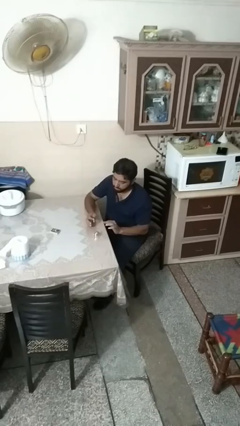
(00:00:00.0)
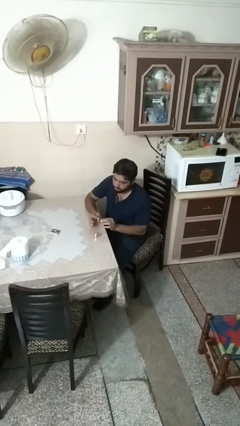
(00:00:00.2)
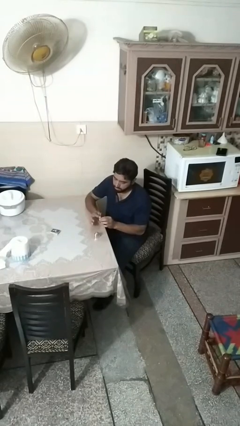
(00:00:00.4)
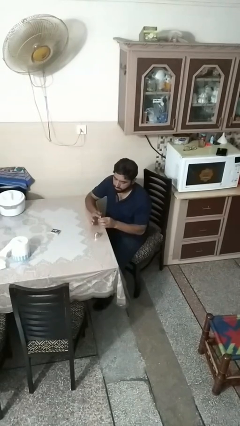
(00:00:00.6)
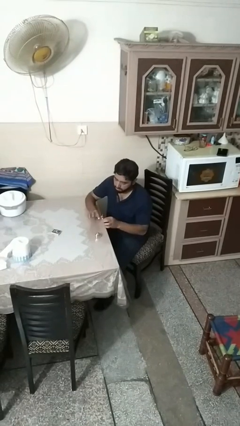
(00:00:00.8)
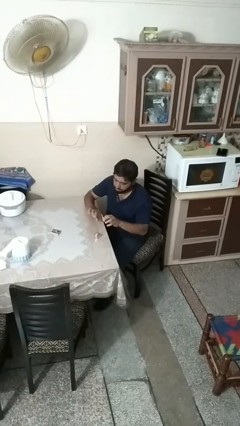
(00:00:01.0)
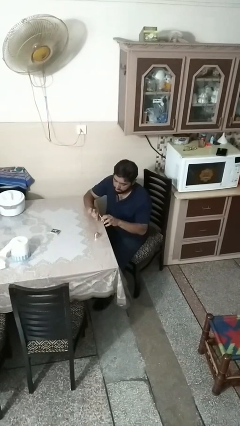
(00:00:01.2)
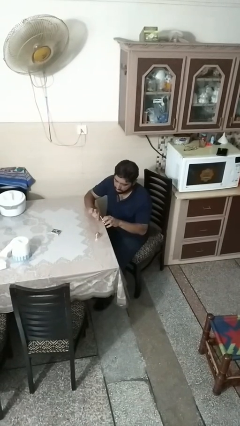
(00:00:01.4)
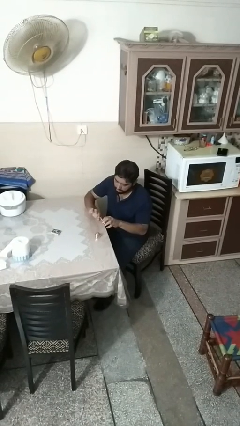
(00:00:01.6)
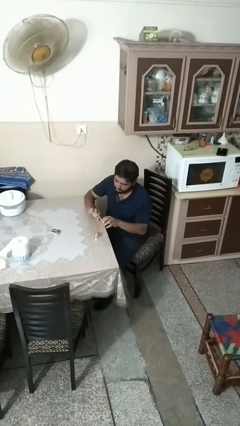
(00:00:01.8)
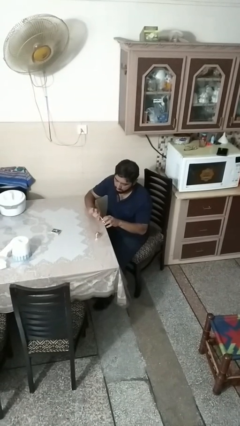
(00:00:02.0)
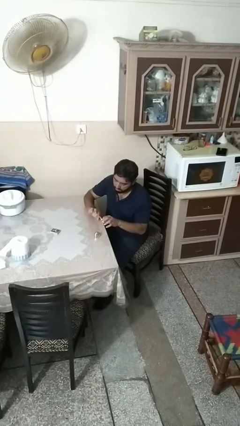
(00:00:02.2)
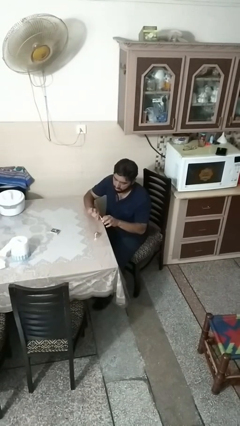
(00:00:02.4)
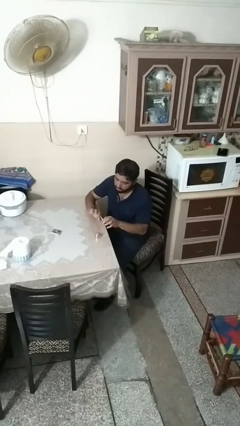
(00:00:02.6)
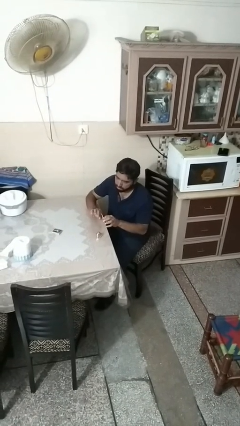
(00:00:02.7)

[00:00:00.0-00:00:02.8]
person paints fingernails

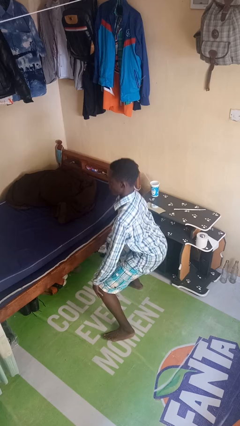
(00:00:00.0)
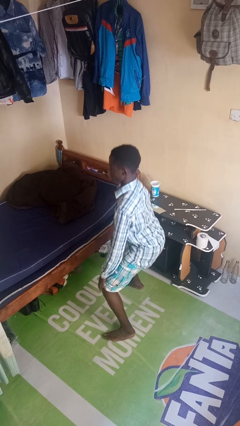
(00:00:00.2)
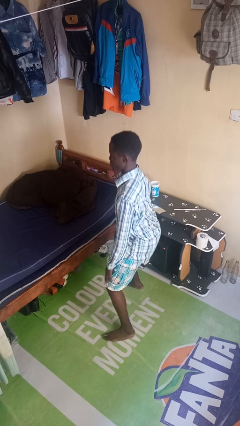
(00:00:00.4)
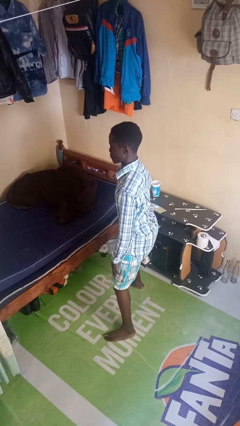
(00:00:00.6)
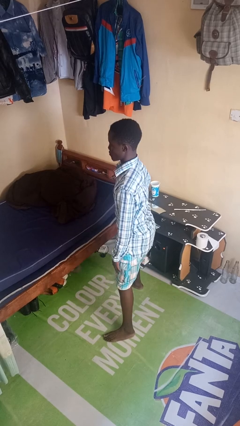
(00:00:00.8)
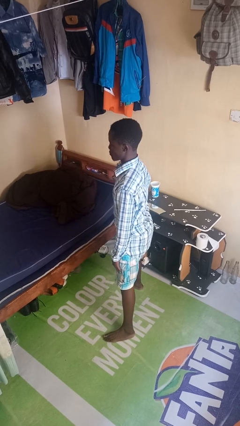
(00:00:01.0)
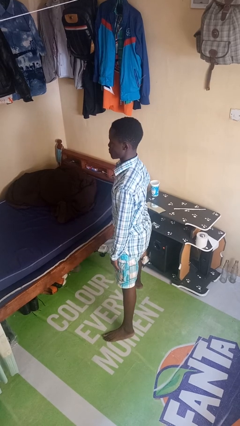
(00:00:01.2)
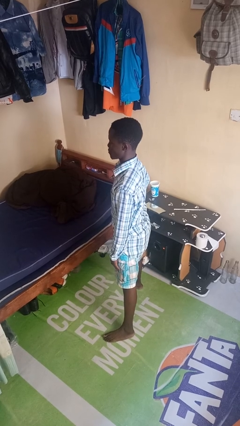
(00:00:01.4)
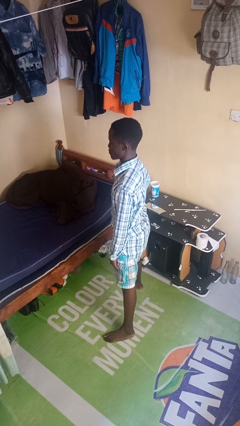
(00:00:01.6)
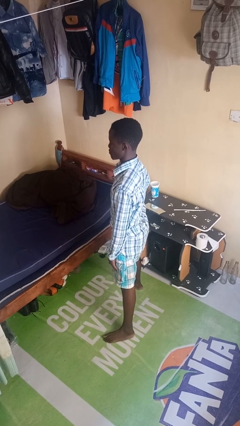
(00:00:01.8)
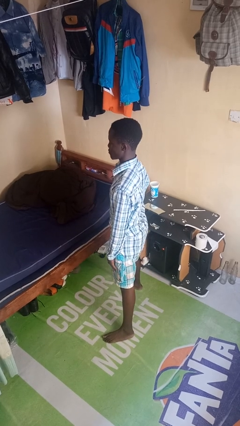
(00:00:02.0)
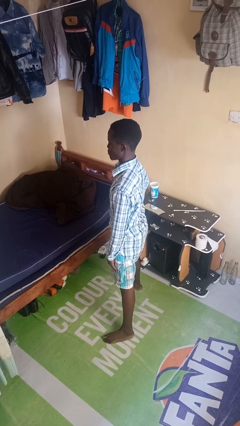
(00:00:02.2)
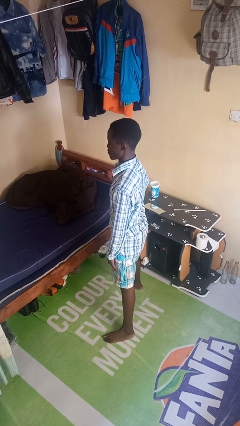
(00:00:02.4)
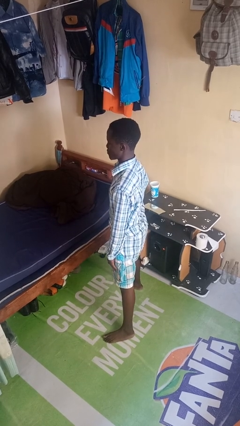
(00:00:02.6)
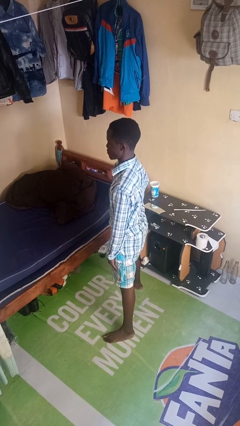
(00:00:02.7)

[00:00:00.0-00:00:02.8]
person stands up

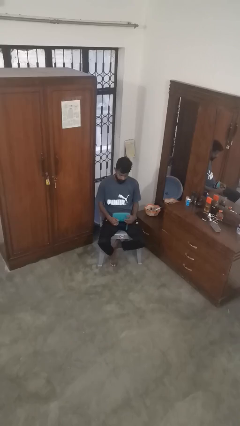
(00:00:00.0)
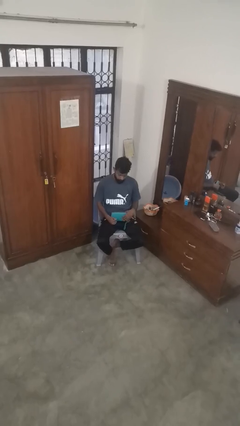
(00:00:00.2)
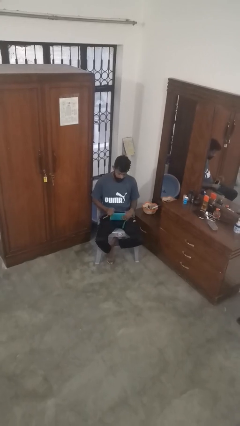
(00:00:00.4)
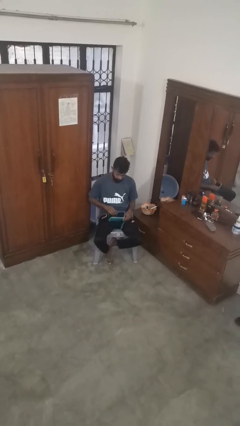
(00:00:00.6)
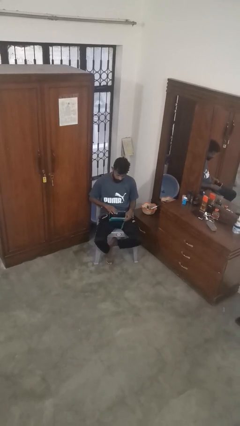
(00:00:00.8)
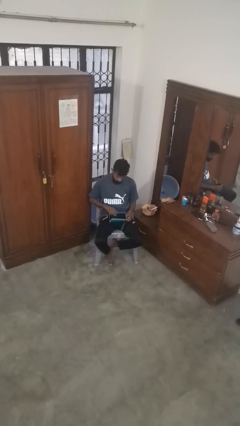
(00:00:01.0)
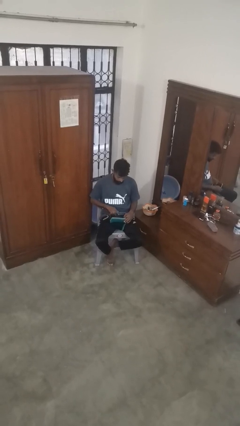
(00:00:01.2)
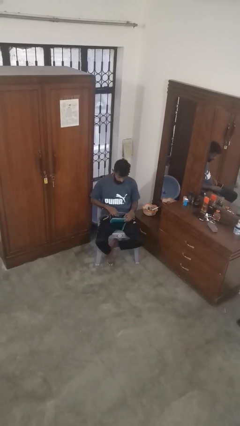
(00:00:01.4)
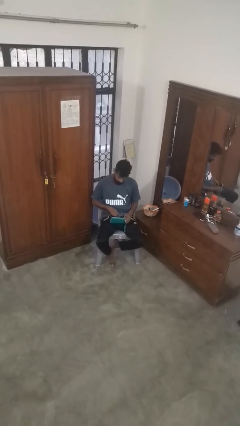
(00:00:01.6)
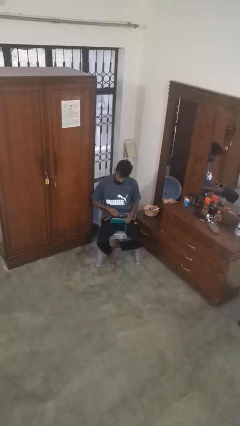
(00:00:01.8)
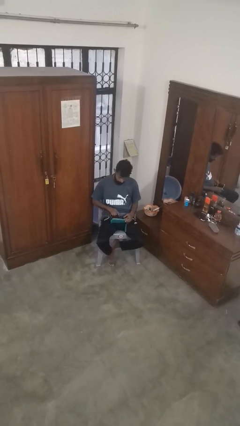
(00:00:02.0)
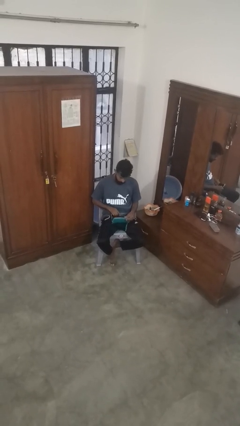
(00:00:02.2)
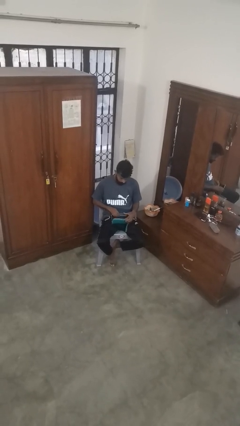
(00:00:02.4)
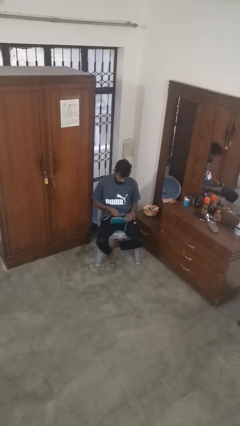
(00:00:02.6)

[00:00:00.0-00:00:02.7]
person searches in purse

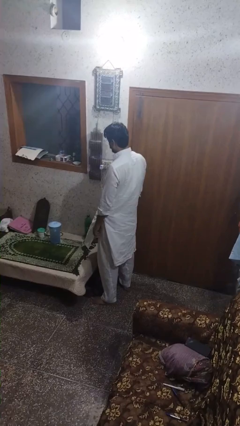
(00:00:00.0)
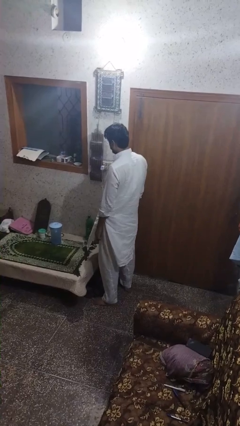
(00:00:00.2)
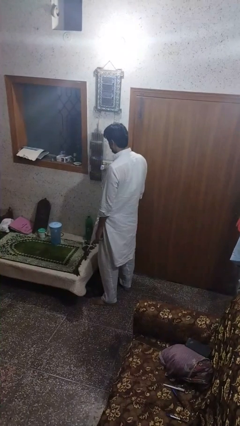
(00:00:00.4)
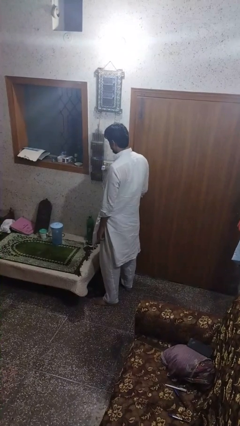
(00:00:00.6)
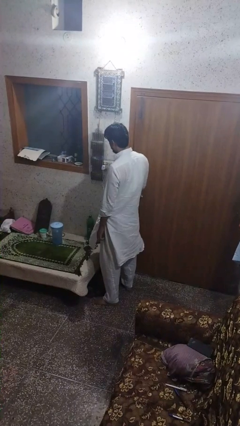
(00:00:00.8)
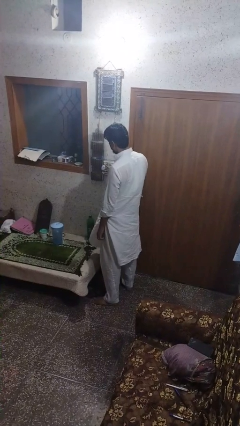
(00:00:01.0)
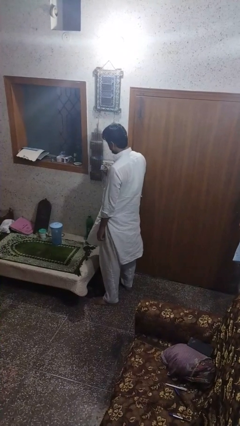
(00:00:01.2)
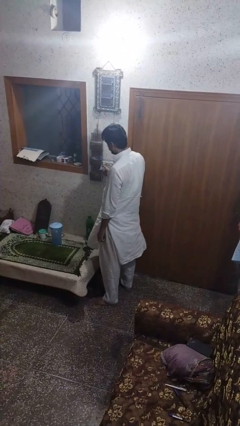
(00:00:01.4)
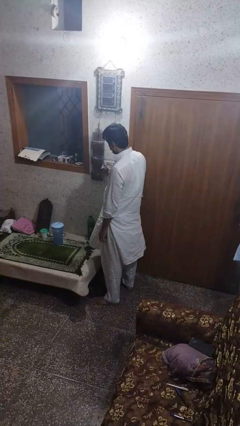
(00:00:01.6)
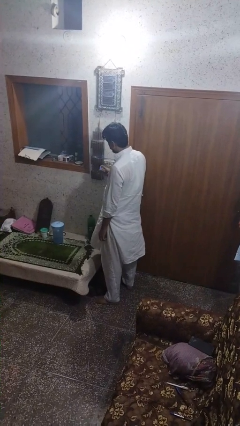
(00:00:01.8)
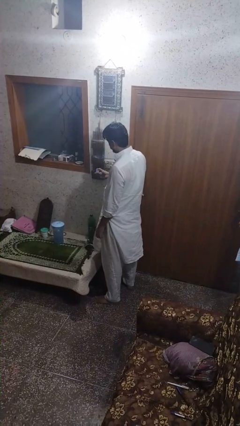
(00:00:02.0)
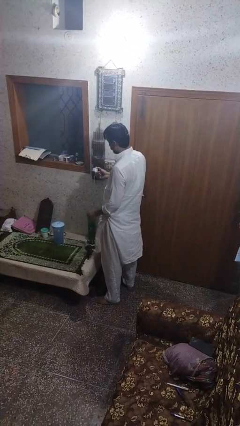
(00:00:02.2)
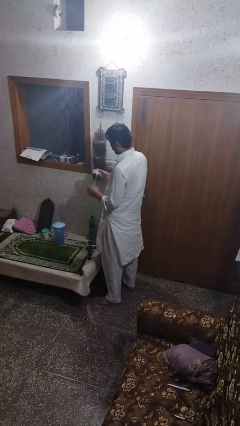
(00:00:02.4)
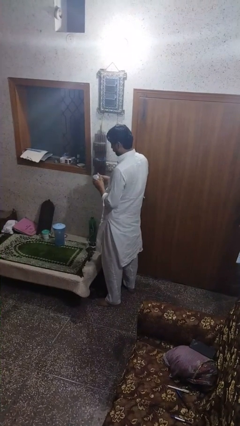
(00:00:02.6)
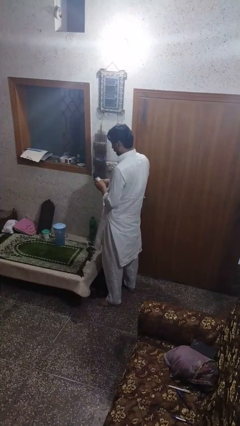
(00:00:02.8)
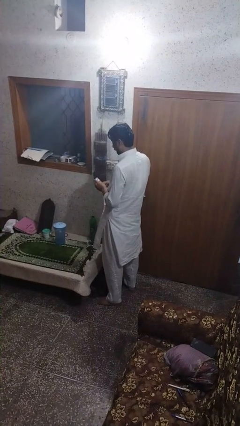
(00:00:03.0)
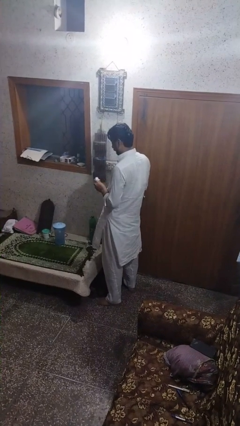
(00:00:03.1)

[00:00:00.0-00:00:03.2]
person unplugs from electrical socket

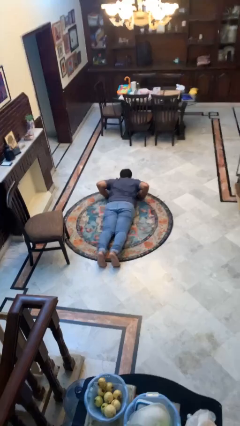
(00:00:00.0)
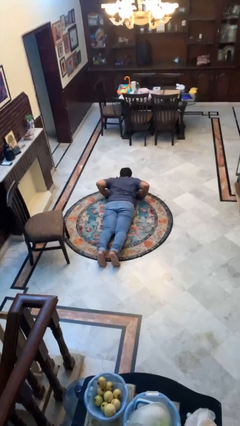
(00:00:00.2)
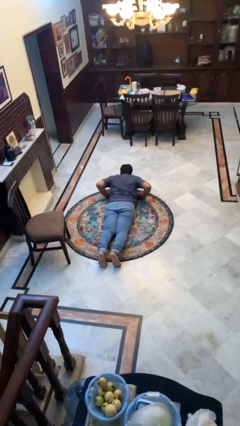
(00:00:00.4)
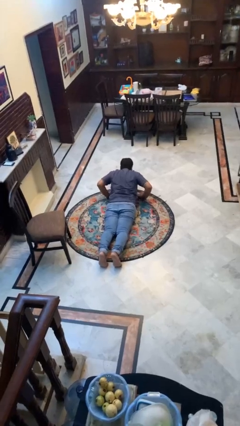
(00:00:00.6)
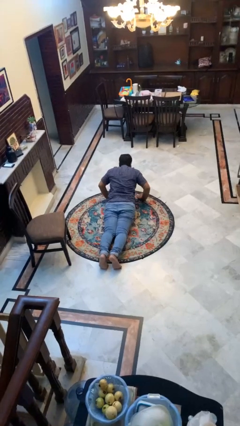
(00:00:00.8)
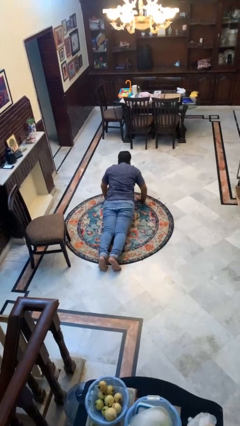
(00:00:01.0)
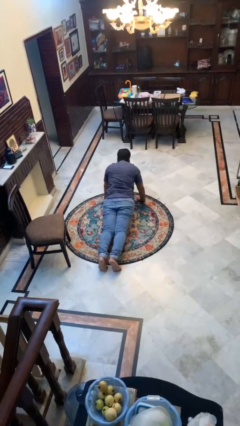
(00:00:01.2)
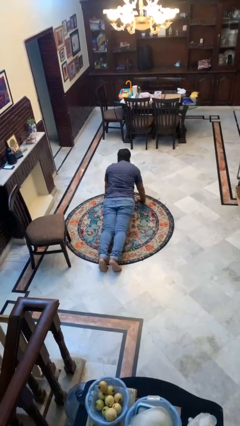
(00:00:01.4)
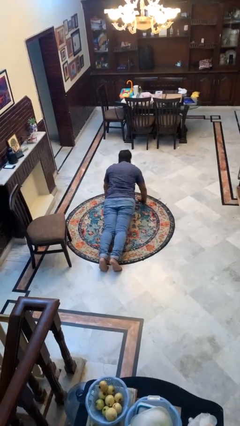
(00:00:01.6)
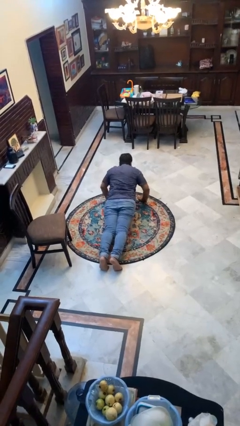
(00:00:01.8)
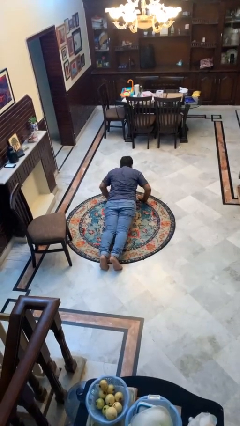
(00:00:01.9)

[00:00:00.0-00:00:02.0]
person exercises with pushup

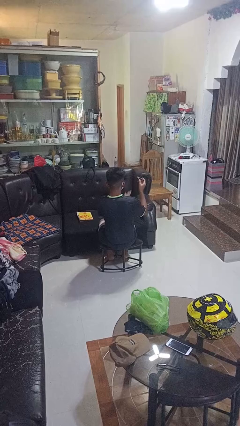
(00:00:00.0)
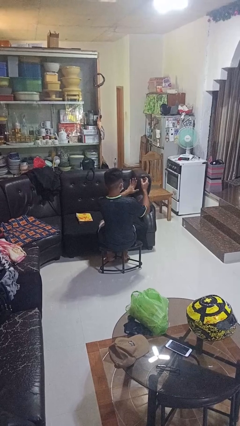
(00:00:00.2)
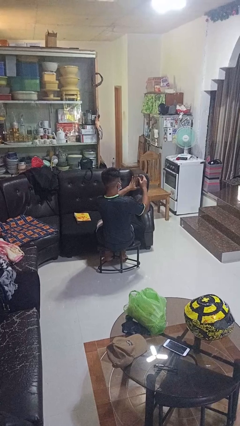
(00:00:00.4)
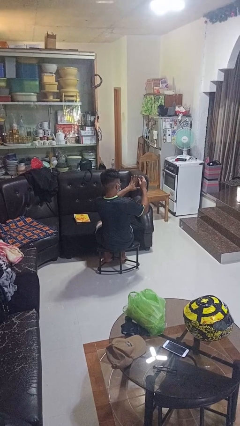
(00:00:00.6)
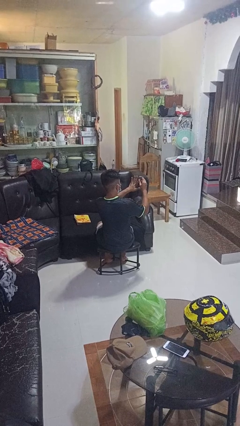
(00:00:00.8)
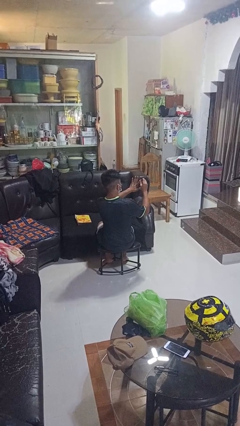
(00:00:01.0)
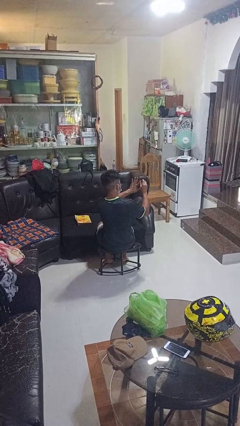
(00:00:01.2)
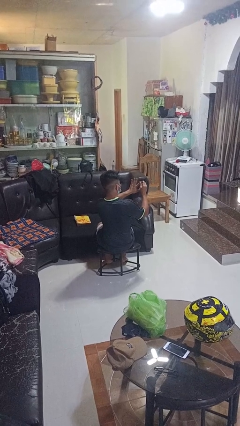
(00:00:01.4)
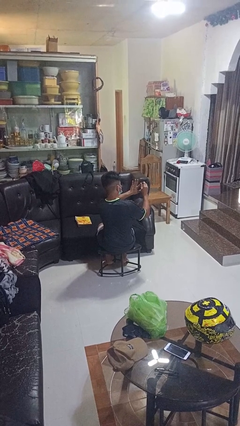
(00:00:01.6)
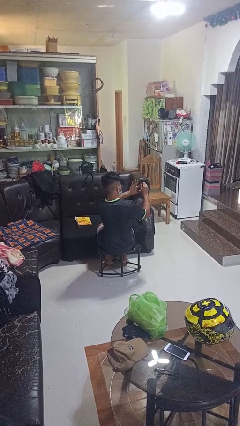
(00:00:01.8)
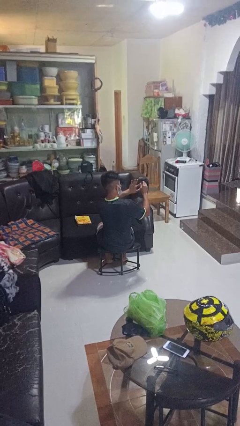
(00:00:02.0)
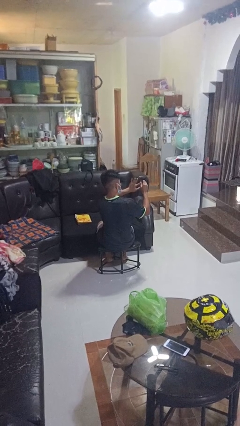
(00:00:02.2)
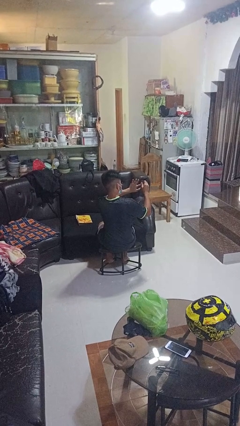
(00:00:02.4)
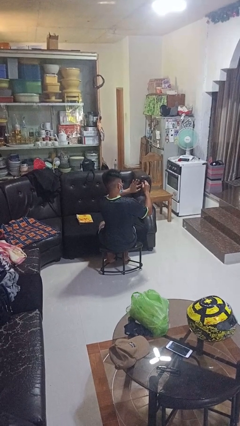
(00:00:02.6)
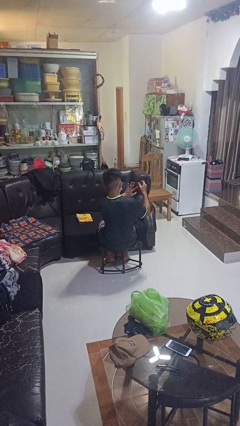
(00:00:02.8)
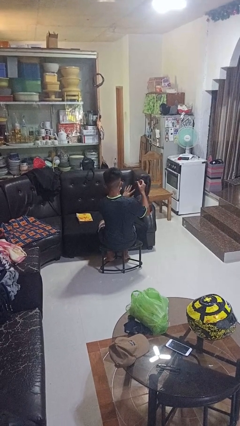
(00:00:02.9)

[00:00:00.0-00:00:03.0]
person clips fingernails

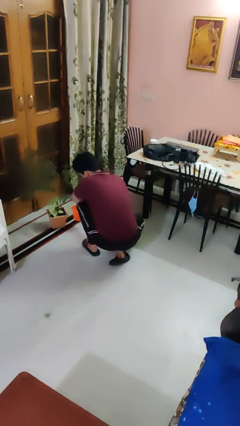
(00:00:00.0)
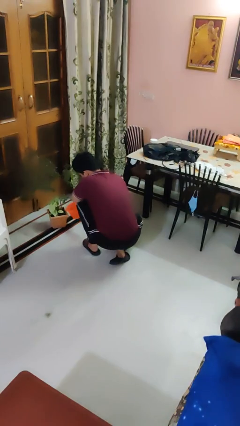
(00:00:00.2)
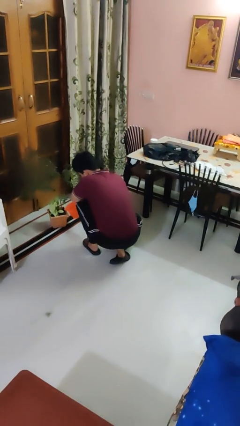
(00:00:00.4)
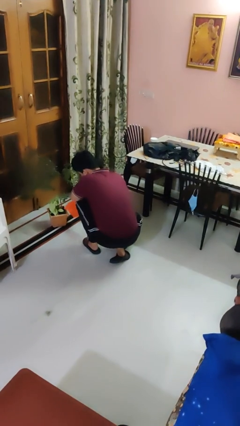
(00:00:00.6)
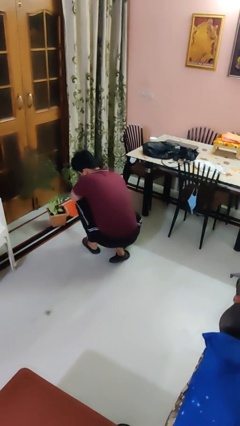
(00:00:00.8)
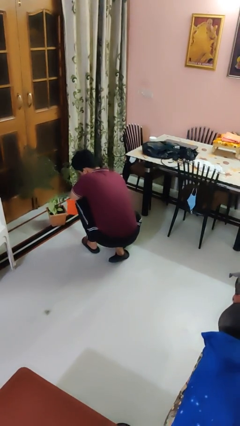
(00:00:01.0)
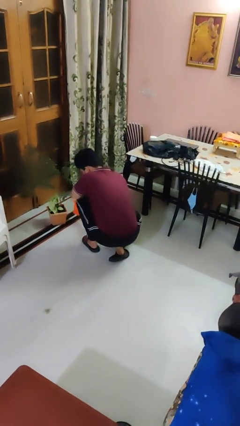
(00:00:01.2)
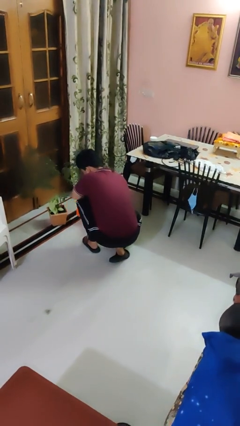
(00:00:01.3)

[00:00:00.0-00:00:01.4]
person waters houseplant
